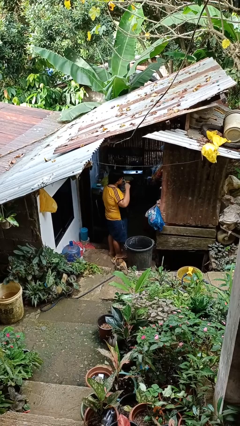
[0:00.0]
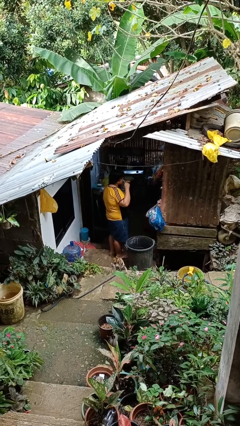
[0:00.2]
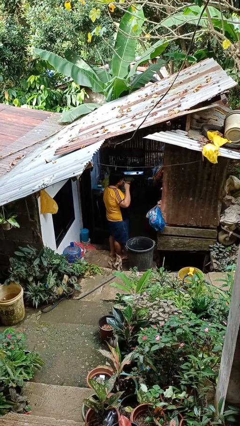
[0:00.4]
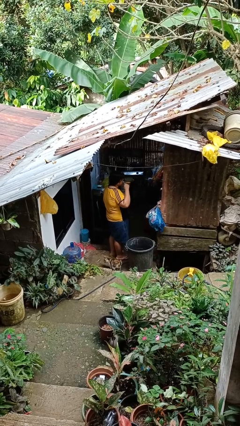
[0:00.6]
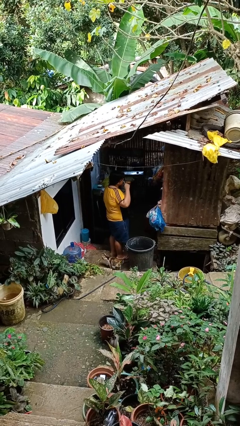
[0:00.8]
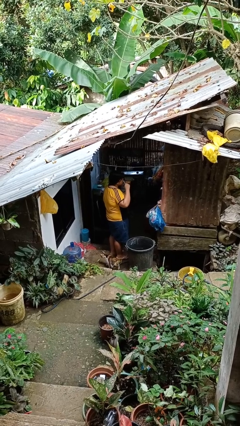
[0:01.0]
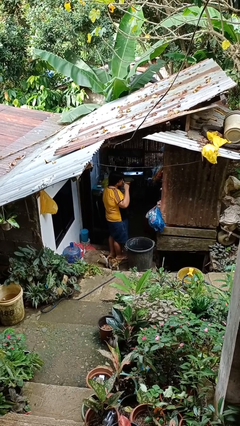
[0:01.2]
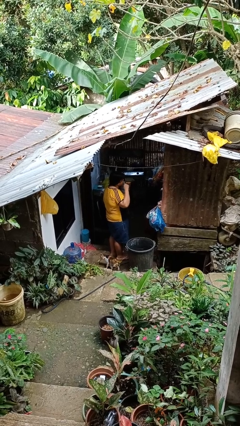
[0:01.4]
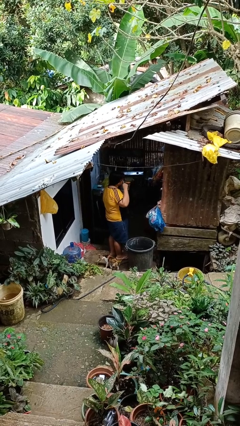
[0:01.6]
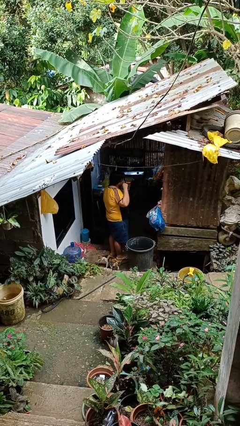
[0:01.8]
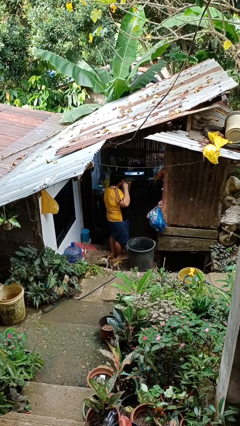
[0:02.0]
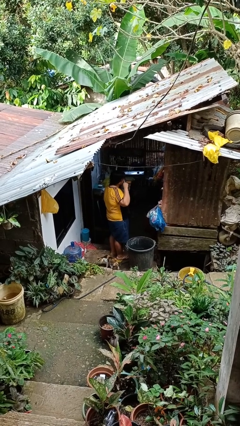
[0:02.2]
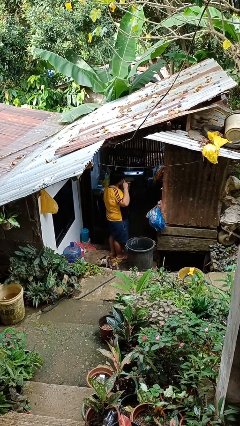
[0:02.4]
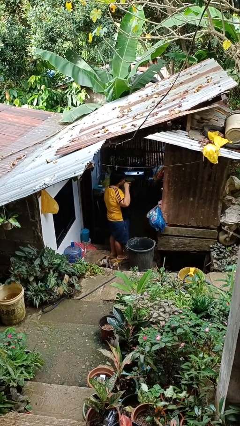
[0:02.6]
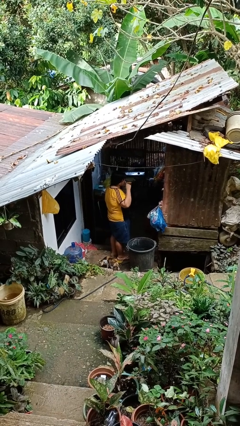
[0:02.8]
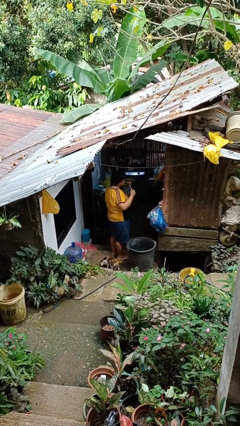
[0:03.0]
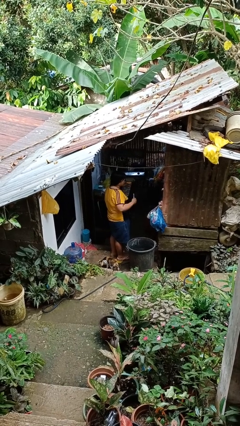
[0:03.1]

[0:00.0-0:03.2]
person brushes teeth

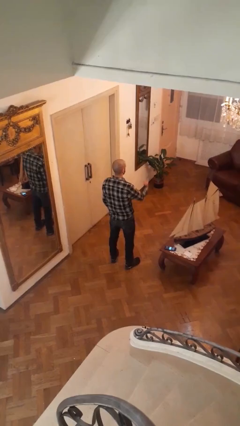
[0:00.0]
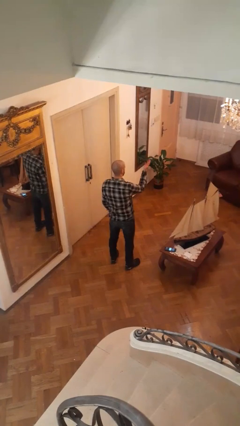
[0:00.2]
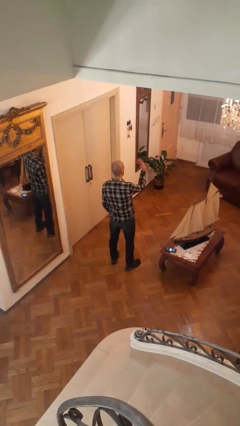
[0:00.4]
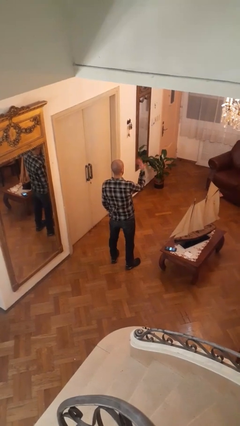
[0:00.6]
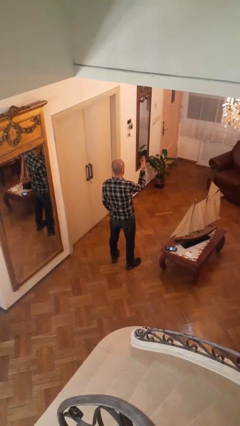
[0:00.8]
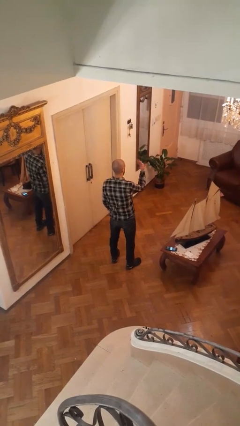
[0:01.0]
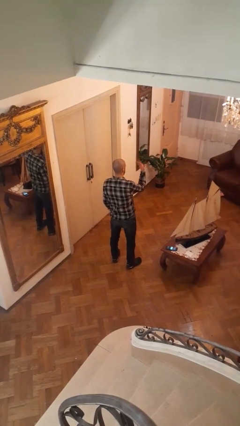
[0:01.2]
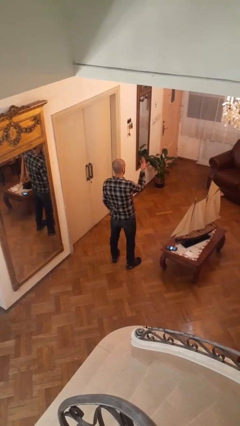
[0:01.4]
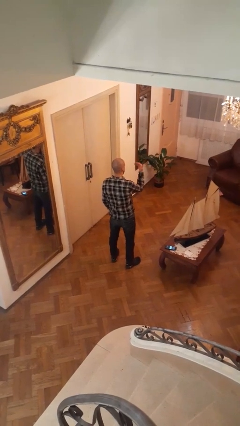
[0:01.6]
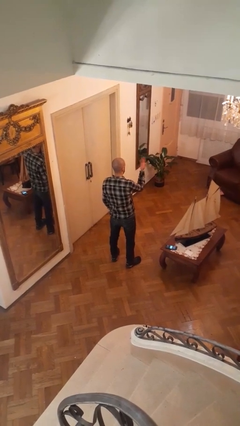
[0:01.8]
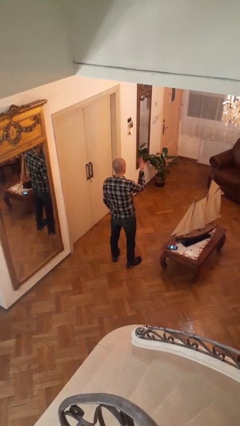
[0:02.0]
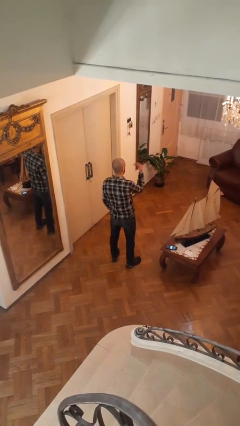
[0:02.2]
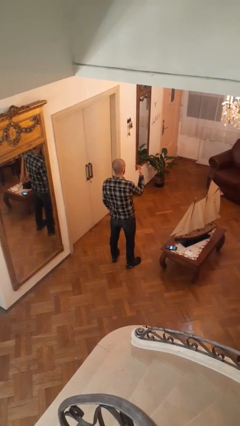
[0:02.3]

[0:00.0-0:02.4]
person gestures come here

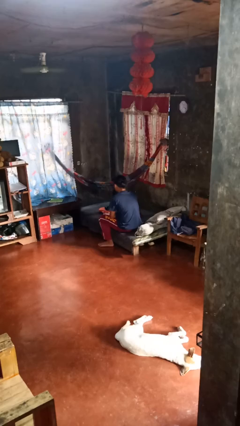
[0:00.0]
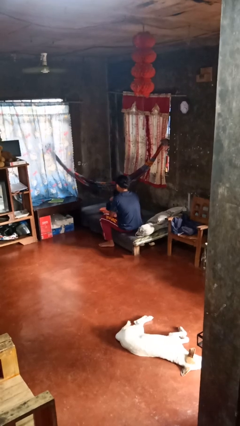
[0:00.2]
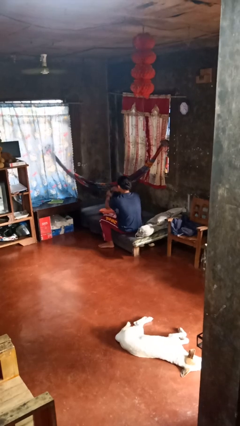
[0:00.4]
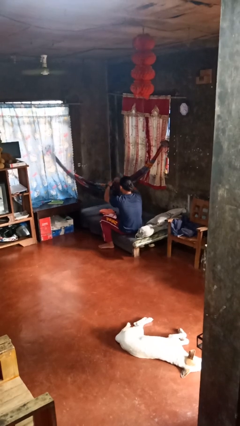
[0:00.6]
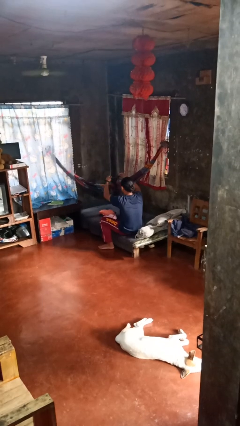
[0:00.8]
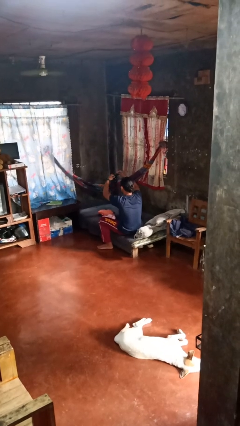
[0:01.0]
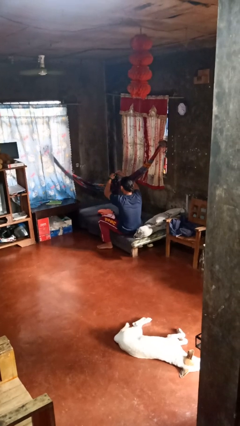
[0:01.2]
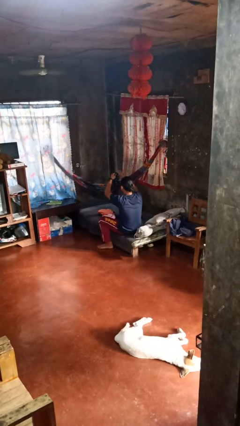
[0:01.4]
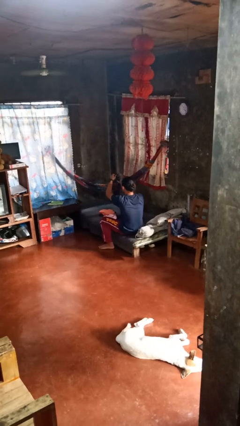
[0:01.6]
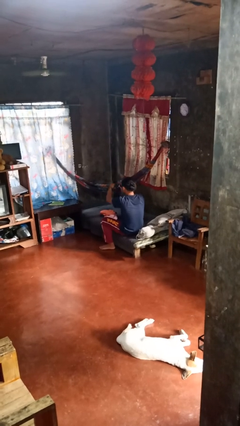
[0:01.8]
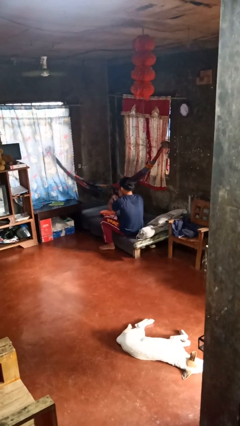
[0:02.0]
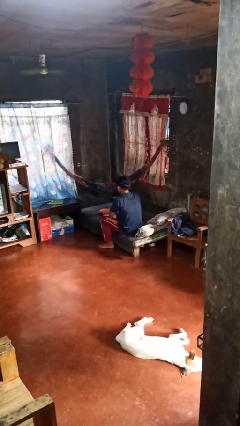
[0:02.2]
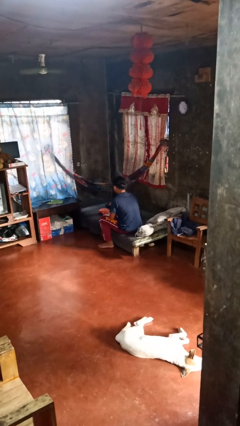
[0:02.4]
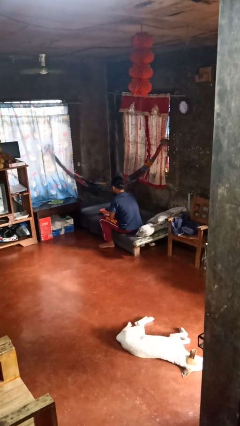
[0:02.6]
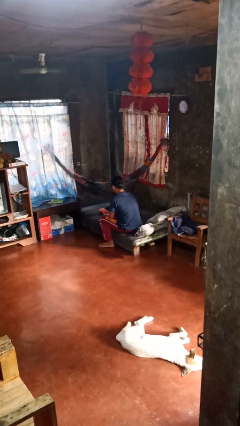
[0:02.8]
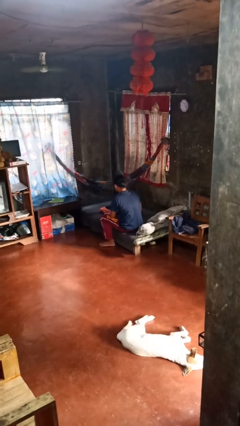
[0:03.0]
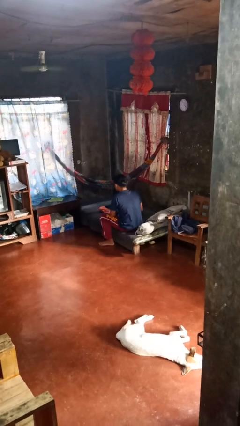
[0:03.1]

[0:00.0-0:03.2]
person folds socks

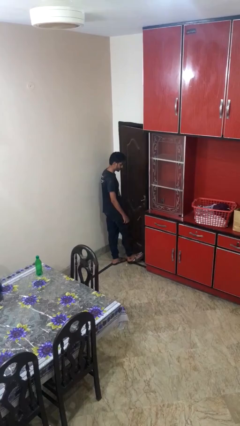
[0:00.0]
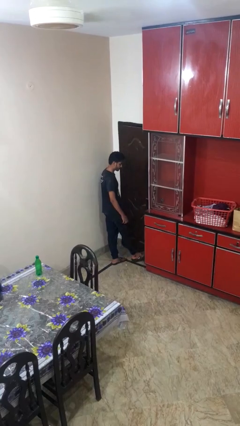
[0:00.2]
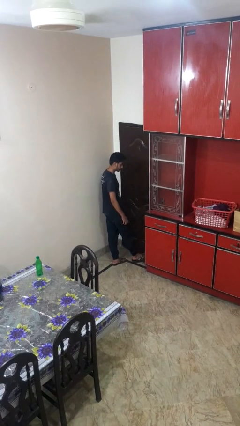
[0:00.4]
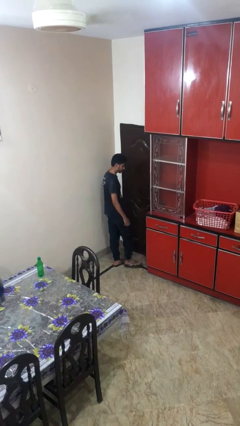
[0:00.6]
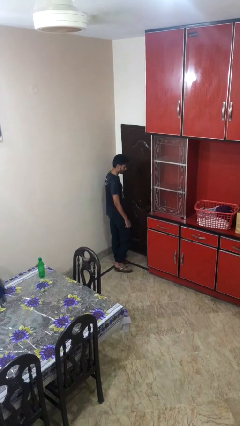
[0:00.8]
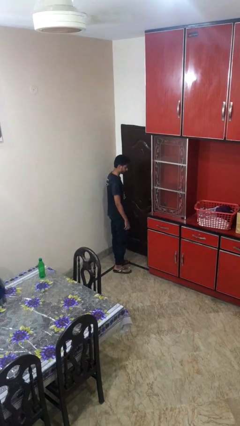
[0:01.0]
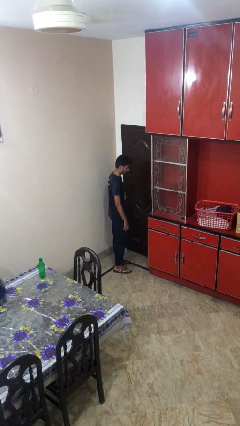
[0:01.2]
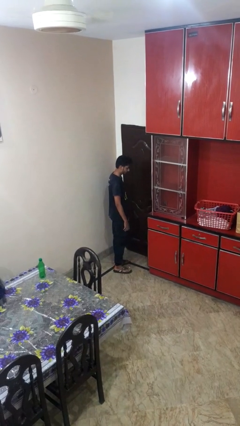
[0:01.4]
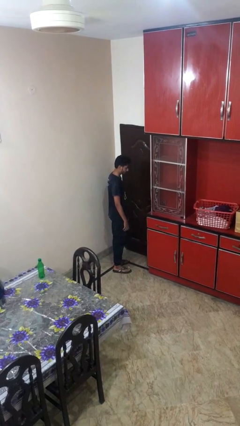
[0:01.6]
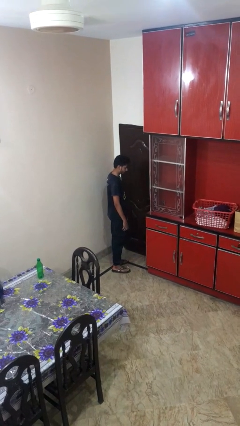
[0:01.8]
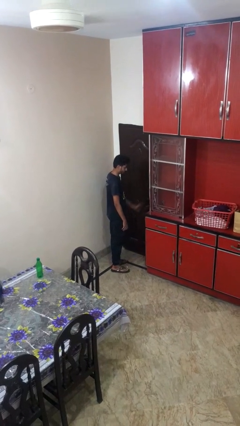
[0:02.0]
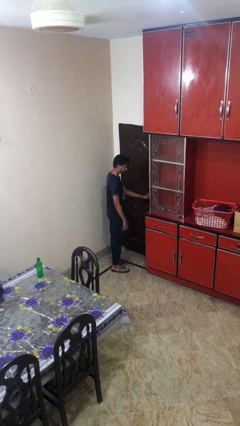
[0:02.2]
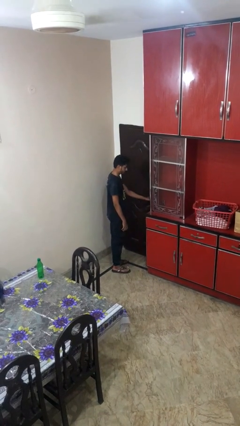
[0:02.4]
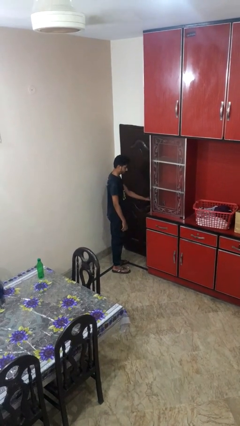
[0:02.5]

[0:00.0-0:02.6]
person closes door with foot

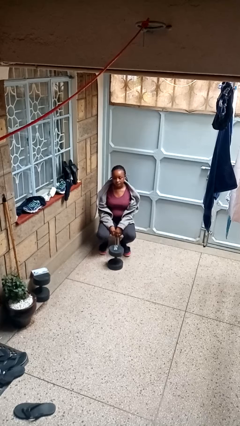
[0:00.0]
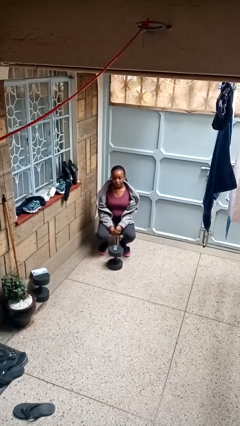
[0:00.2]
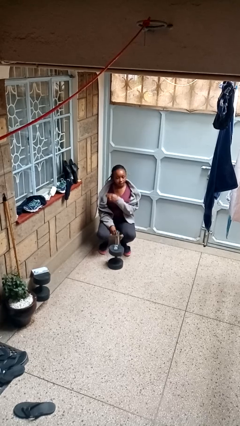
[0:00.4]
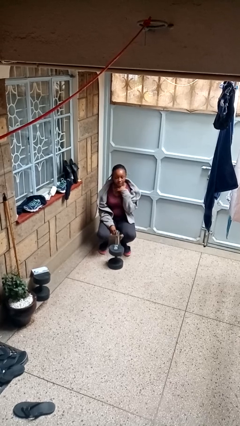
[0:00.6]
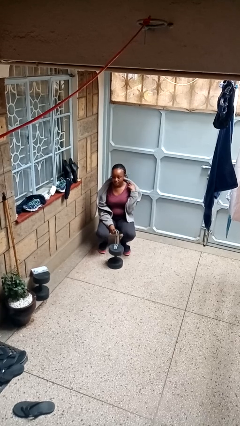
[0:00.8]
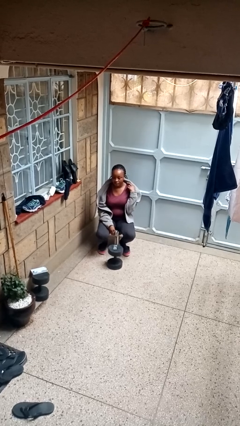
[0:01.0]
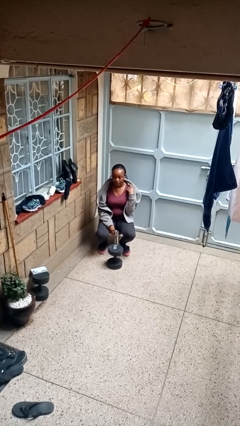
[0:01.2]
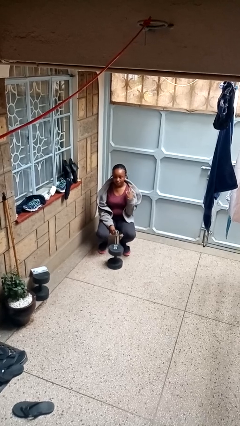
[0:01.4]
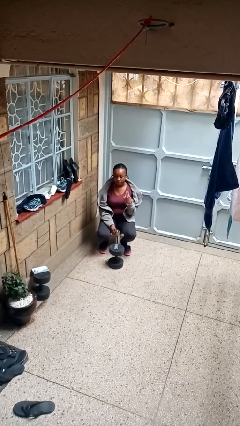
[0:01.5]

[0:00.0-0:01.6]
person gestures cut

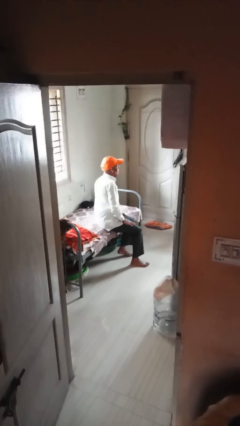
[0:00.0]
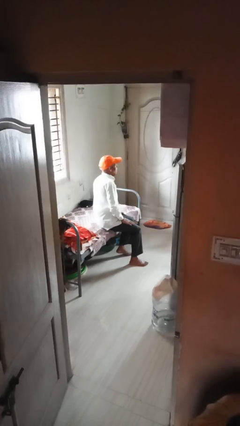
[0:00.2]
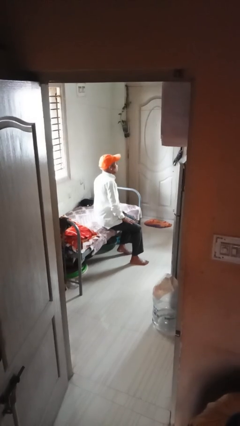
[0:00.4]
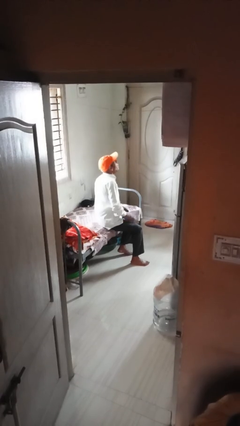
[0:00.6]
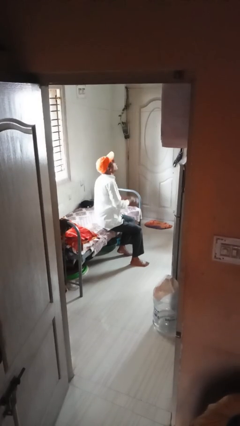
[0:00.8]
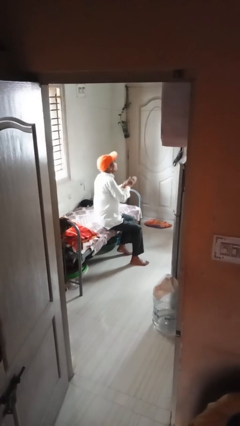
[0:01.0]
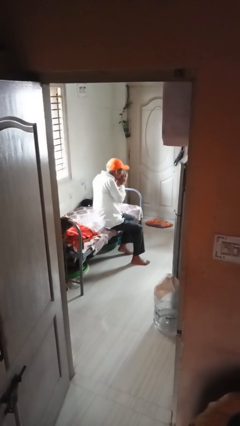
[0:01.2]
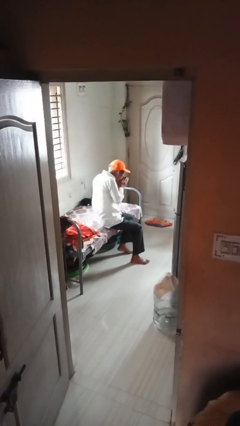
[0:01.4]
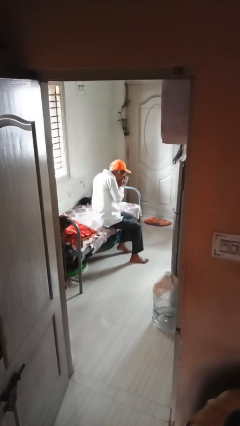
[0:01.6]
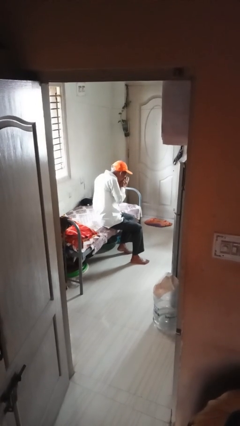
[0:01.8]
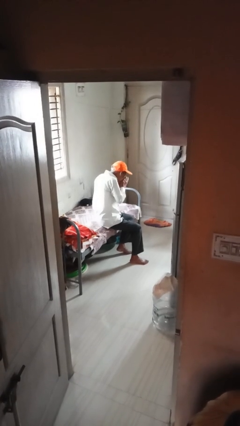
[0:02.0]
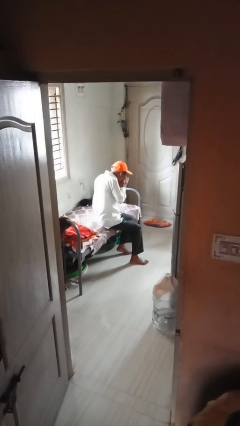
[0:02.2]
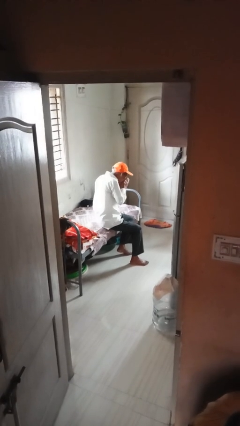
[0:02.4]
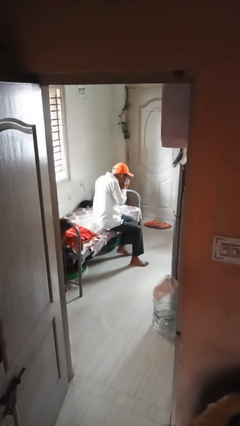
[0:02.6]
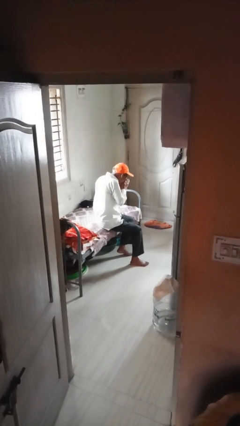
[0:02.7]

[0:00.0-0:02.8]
person sneezes into hand

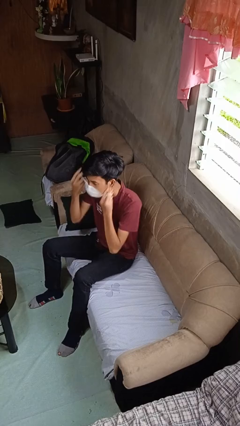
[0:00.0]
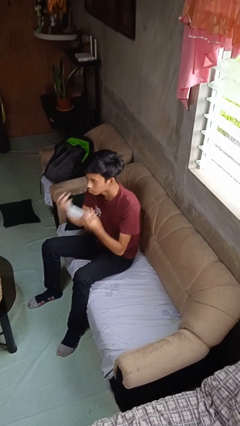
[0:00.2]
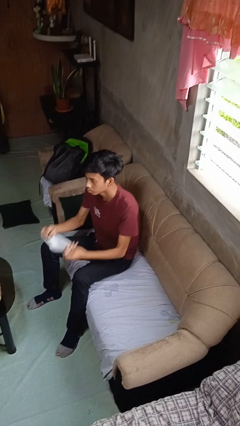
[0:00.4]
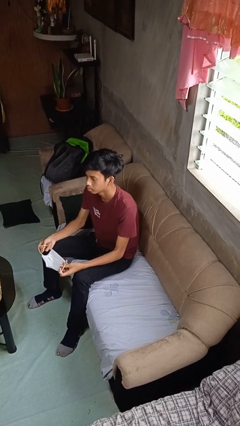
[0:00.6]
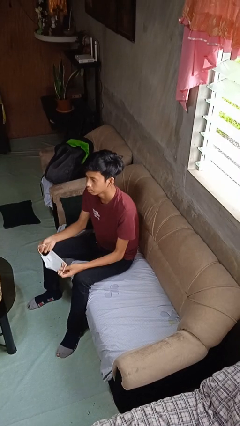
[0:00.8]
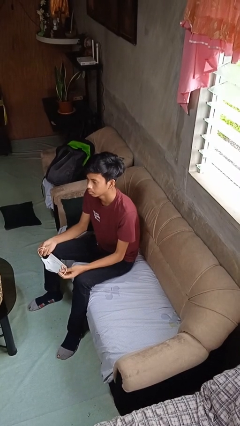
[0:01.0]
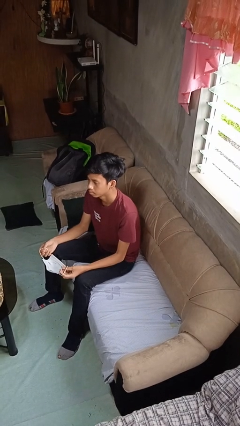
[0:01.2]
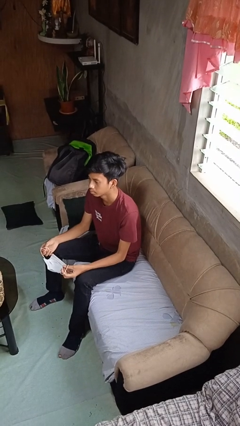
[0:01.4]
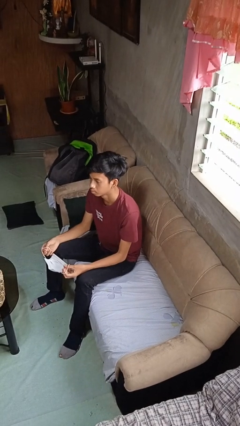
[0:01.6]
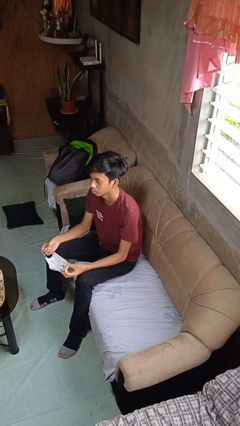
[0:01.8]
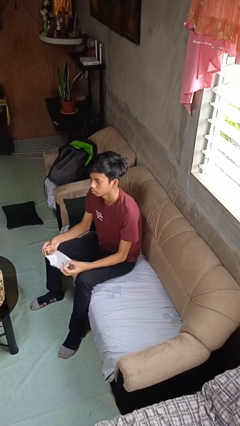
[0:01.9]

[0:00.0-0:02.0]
person takes off facemask
